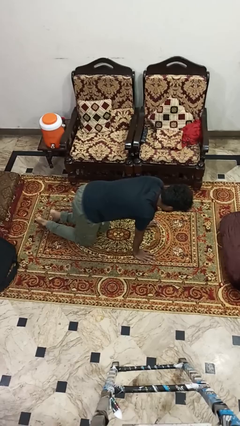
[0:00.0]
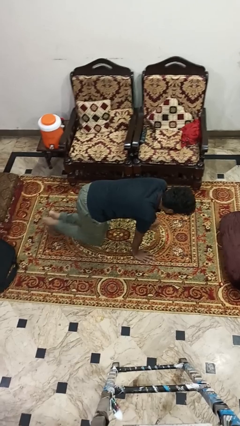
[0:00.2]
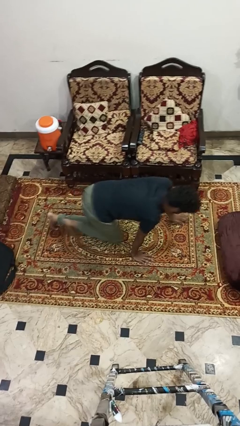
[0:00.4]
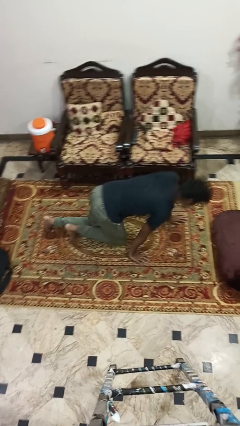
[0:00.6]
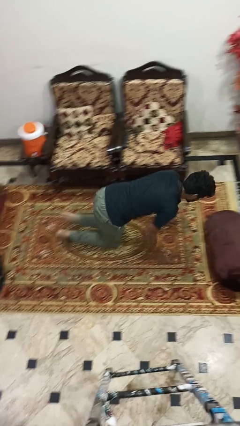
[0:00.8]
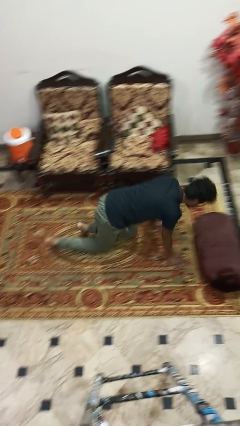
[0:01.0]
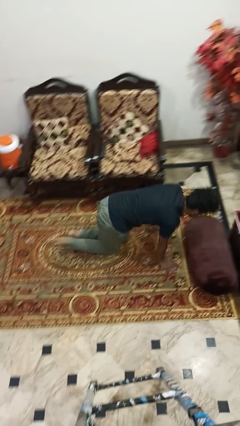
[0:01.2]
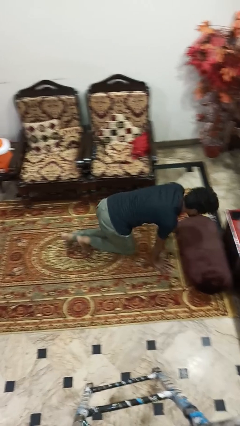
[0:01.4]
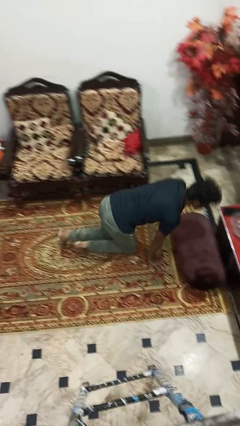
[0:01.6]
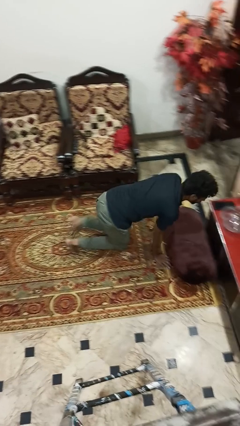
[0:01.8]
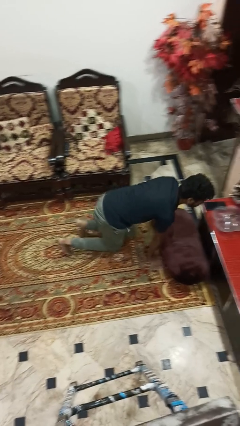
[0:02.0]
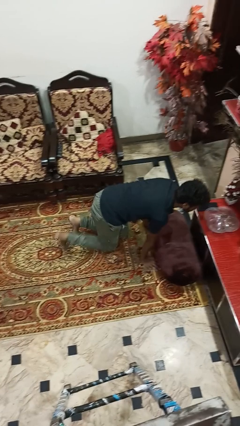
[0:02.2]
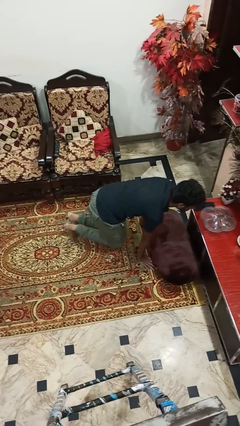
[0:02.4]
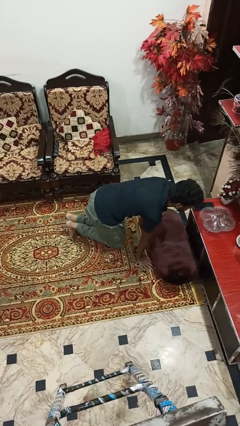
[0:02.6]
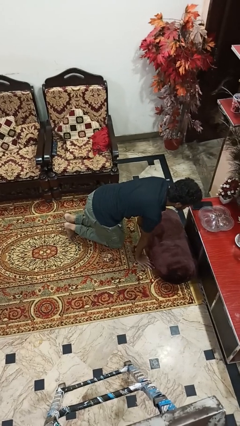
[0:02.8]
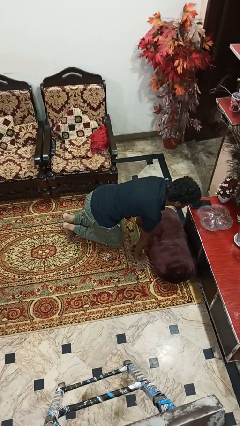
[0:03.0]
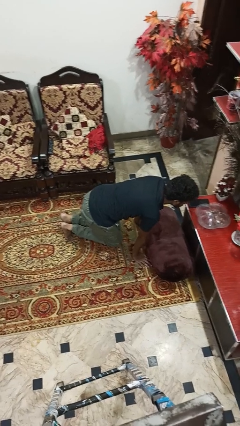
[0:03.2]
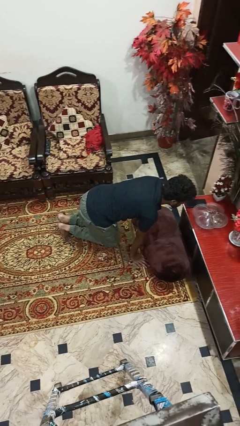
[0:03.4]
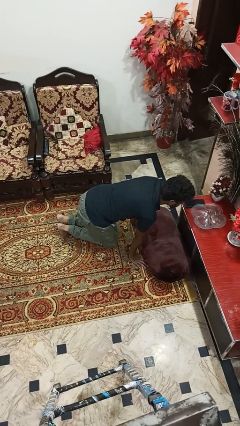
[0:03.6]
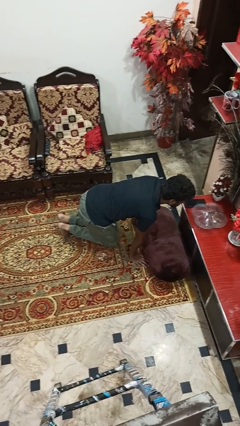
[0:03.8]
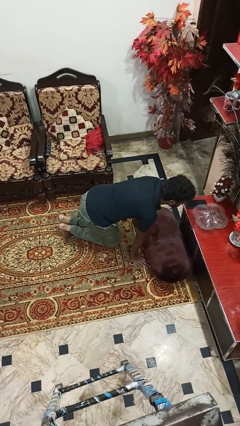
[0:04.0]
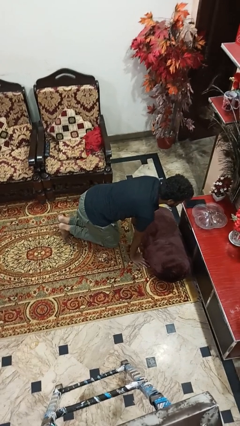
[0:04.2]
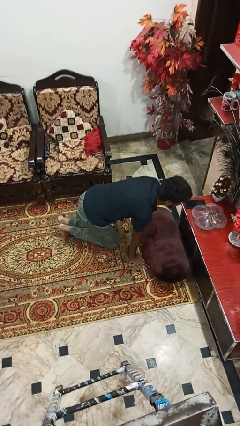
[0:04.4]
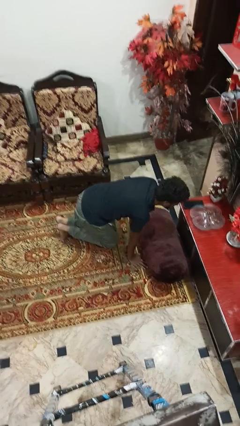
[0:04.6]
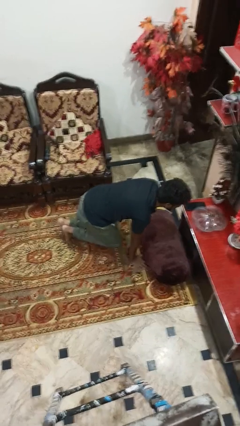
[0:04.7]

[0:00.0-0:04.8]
person crawls

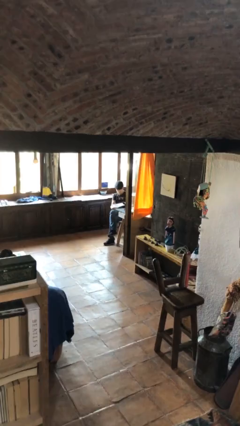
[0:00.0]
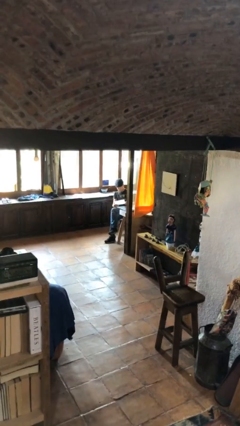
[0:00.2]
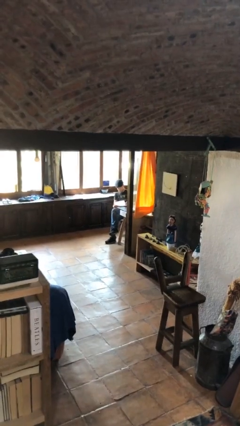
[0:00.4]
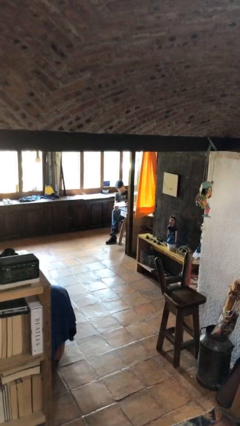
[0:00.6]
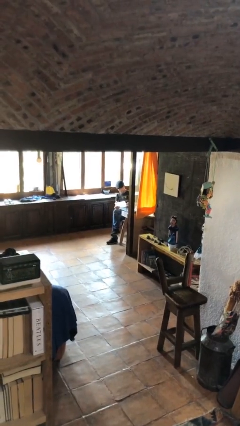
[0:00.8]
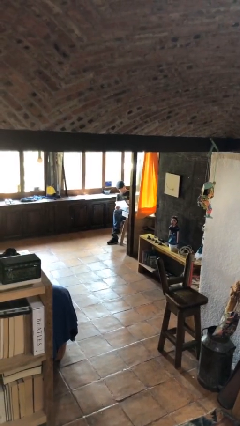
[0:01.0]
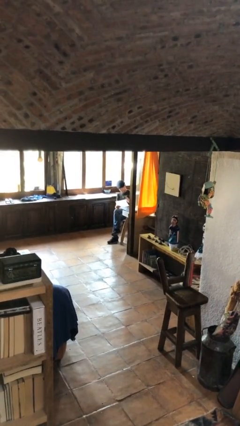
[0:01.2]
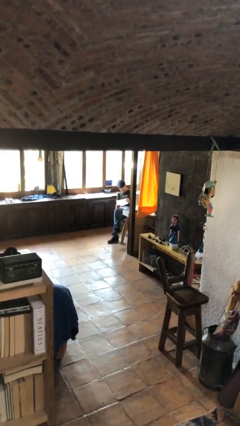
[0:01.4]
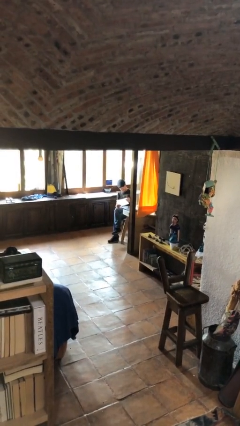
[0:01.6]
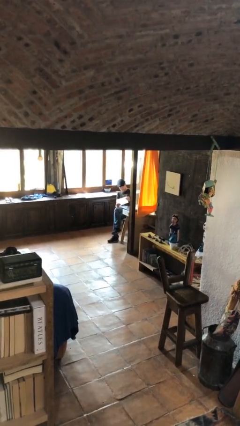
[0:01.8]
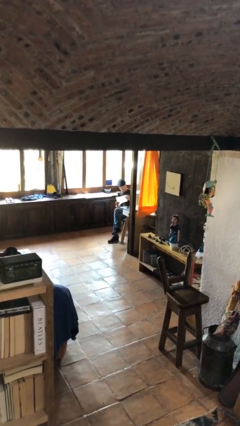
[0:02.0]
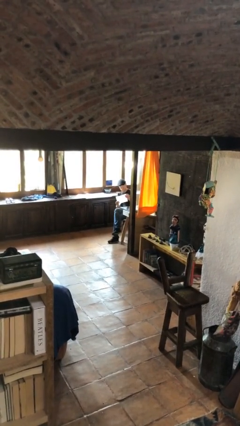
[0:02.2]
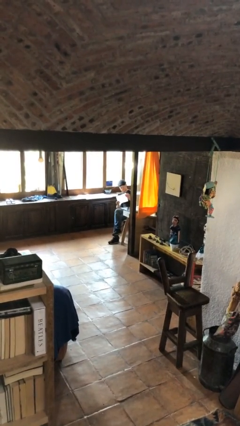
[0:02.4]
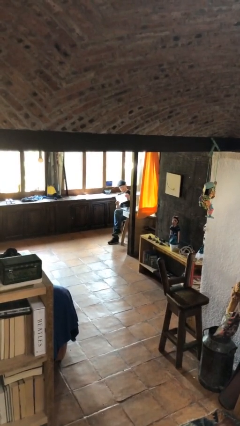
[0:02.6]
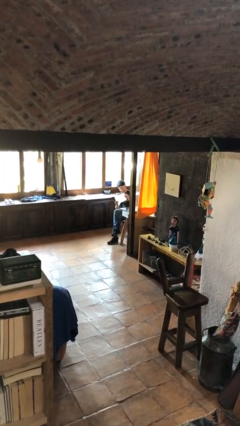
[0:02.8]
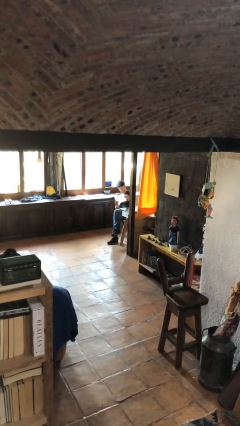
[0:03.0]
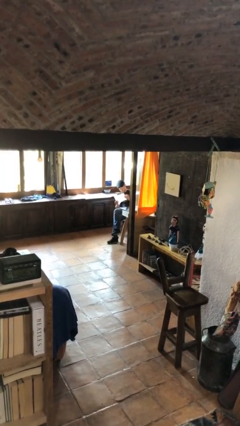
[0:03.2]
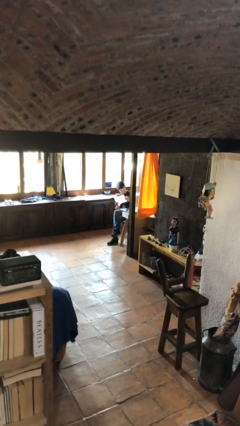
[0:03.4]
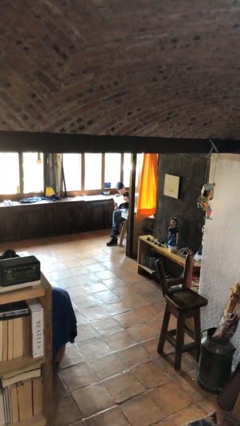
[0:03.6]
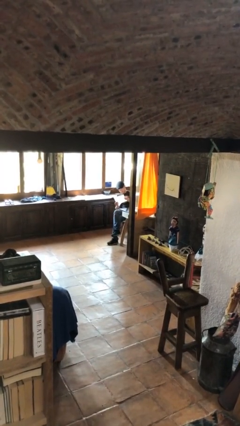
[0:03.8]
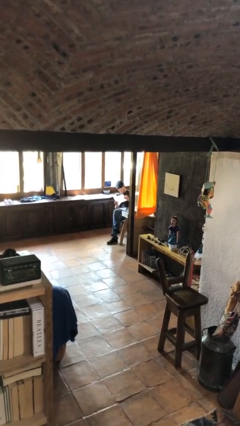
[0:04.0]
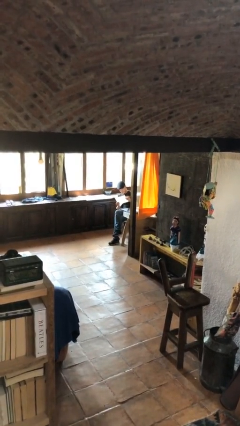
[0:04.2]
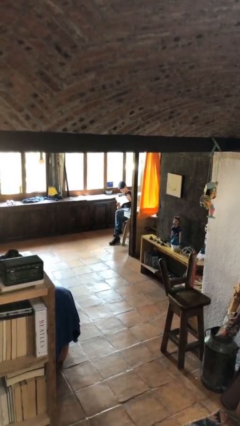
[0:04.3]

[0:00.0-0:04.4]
person reads document

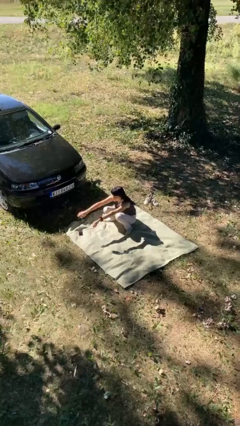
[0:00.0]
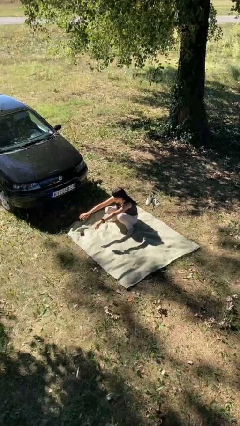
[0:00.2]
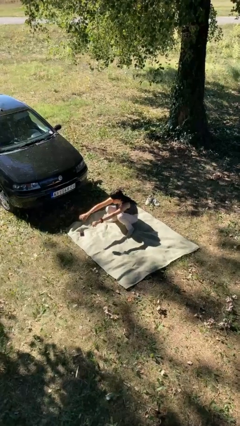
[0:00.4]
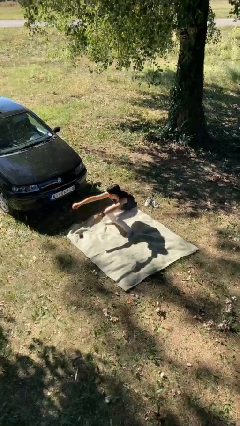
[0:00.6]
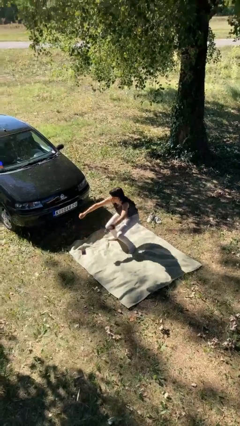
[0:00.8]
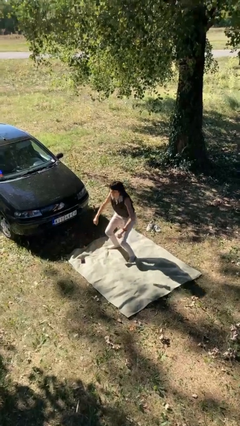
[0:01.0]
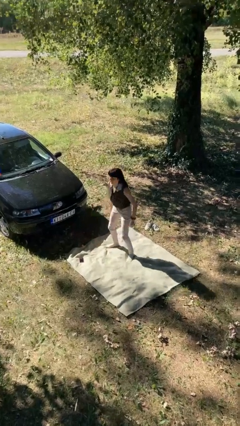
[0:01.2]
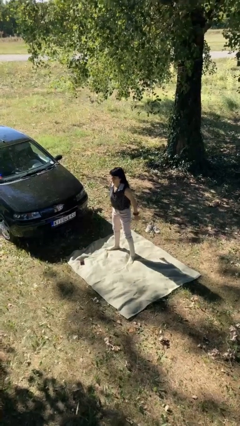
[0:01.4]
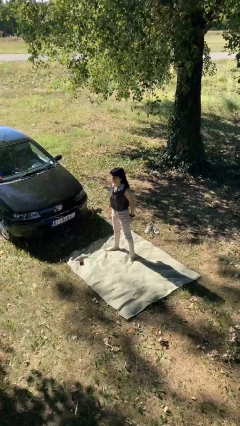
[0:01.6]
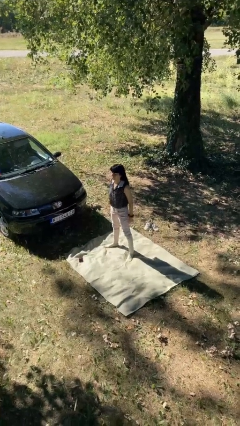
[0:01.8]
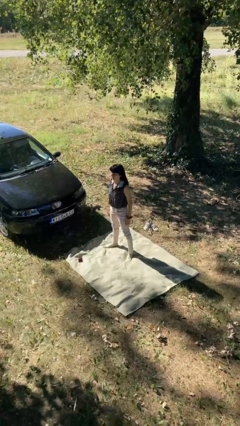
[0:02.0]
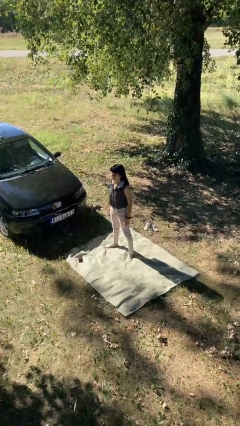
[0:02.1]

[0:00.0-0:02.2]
person stands up

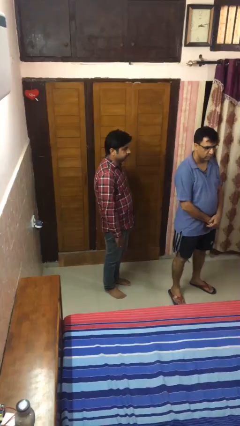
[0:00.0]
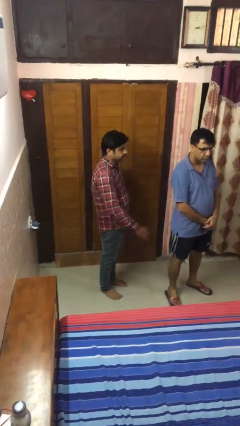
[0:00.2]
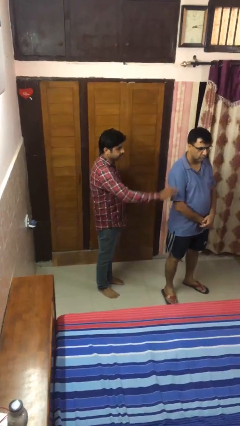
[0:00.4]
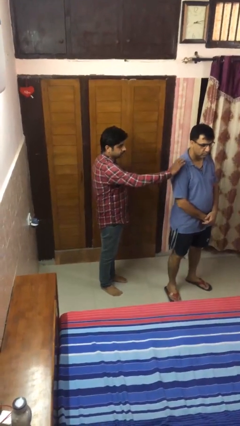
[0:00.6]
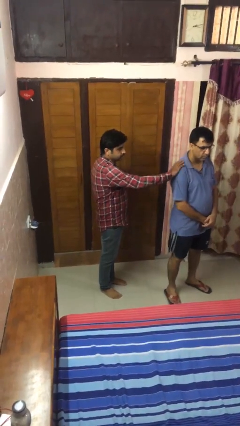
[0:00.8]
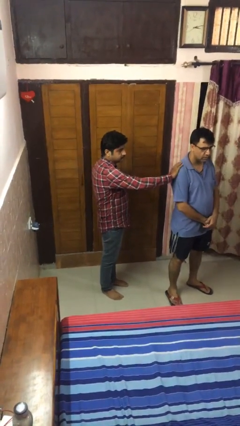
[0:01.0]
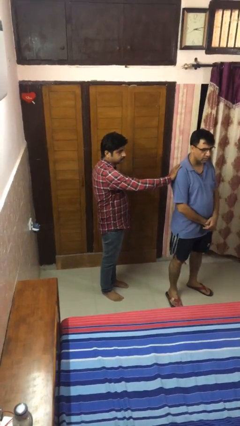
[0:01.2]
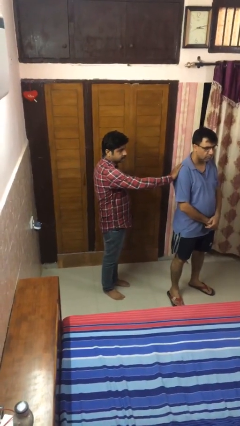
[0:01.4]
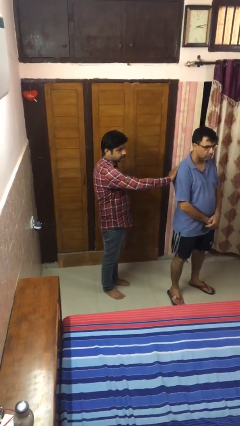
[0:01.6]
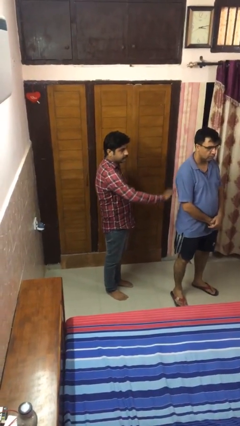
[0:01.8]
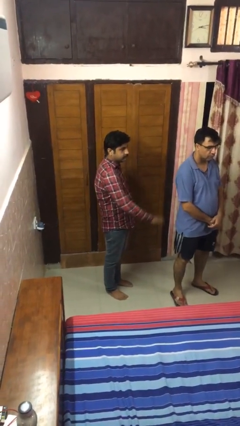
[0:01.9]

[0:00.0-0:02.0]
person touches back of person

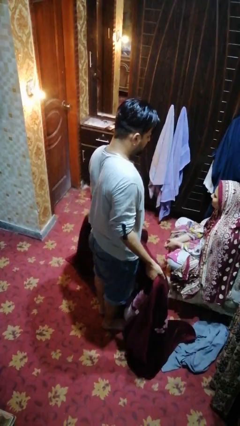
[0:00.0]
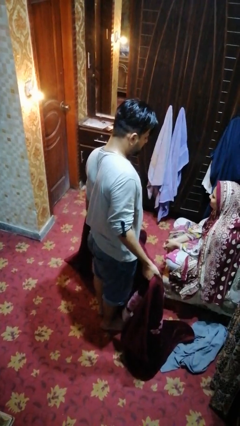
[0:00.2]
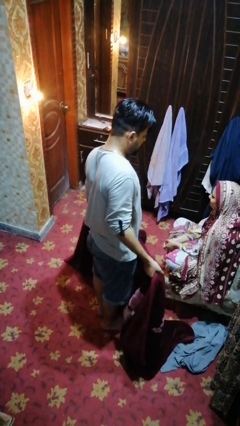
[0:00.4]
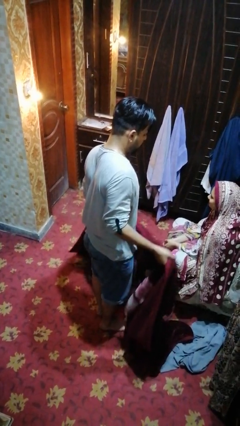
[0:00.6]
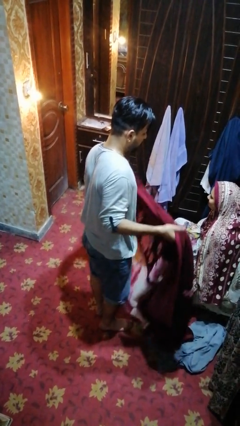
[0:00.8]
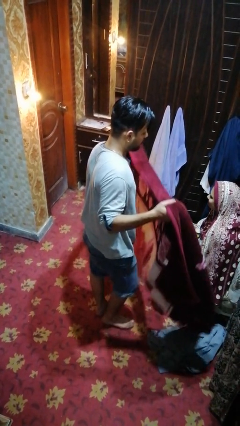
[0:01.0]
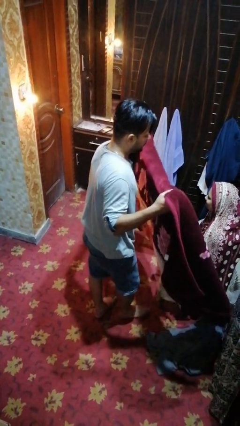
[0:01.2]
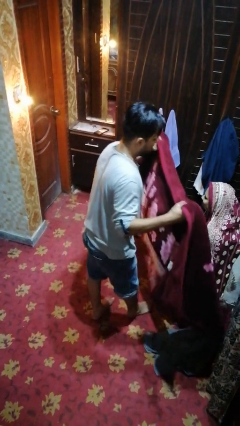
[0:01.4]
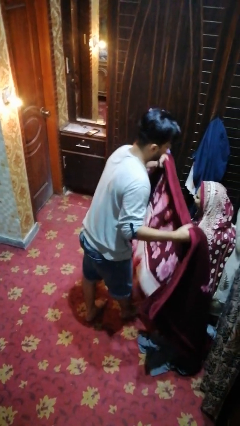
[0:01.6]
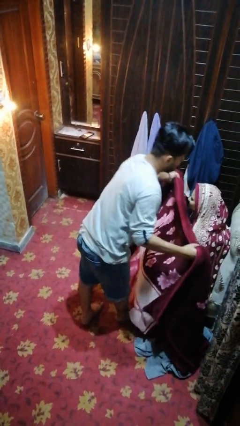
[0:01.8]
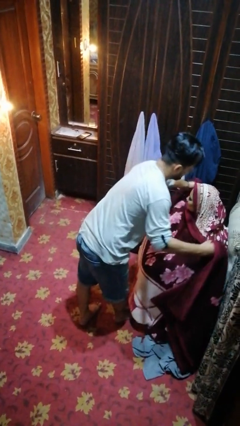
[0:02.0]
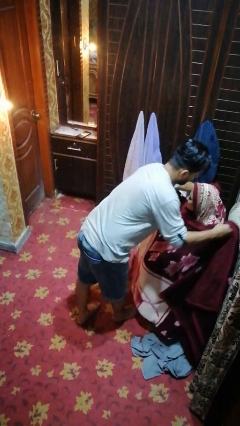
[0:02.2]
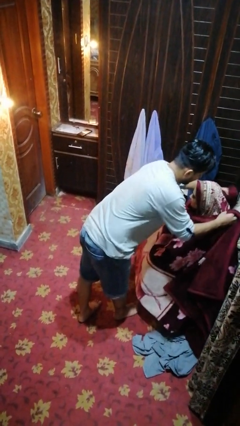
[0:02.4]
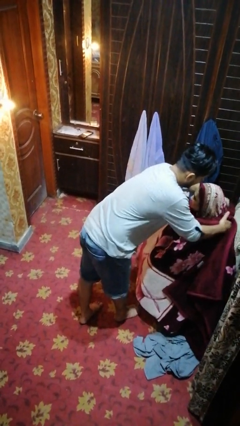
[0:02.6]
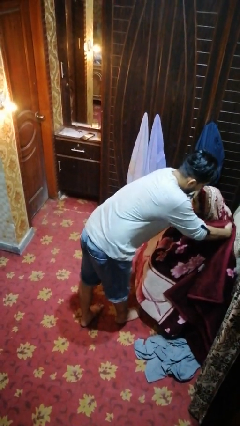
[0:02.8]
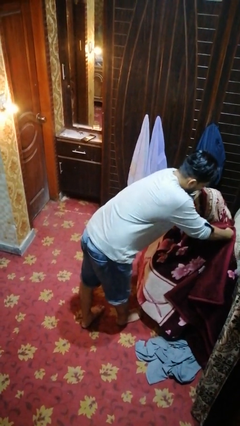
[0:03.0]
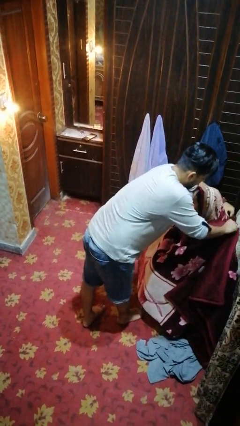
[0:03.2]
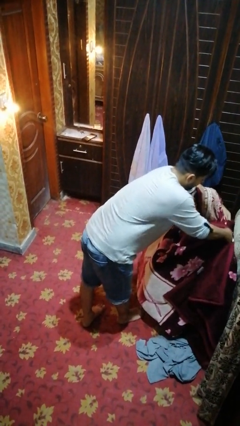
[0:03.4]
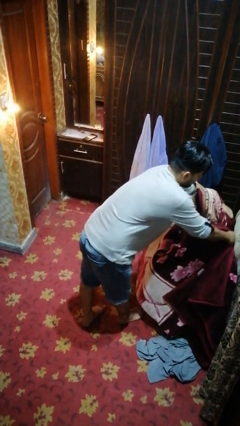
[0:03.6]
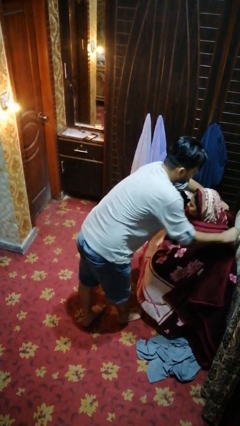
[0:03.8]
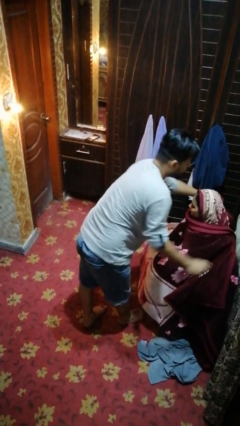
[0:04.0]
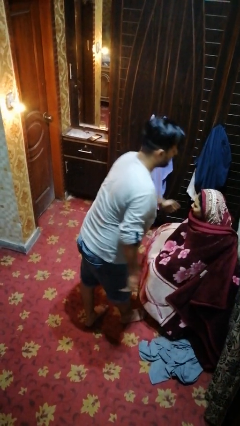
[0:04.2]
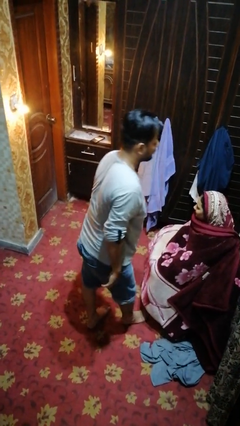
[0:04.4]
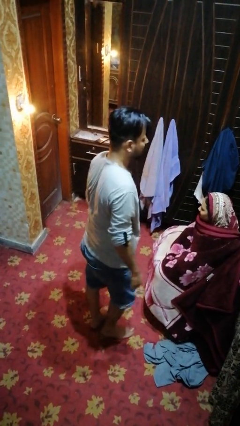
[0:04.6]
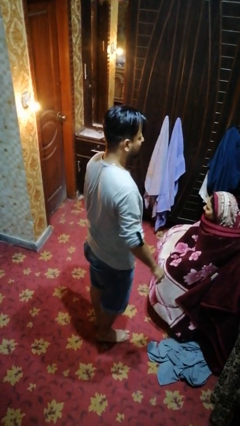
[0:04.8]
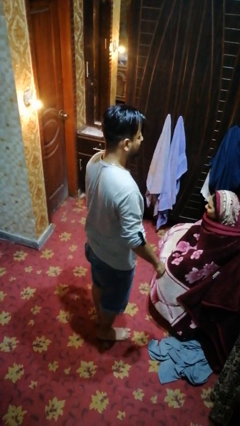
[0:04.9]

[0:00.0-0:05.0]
person covers friend with blanket
